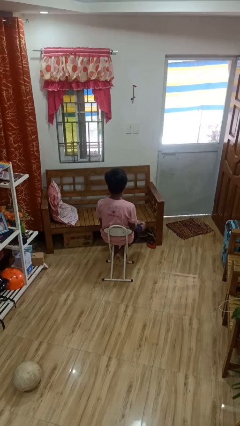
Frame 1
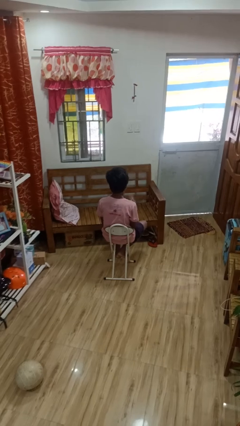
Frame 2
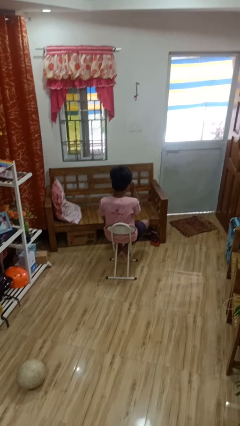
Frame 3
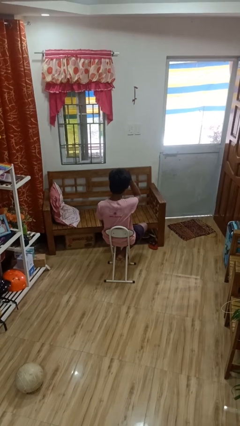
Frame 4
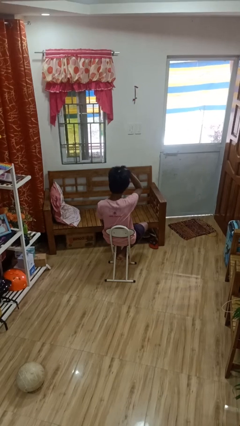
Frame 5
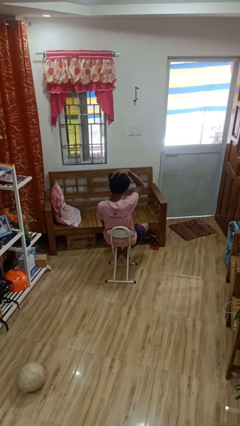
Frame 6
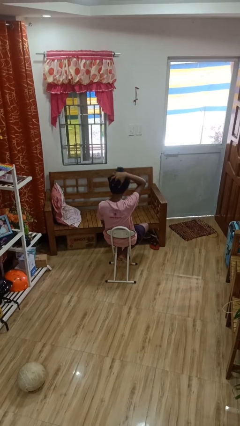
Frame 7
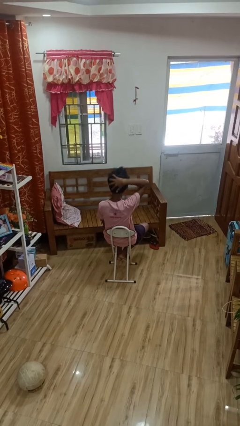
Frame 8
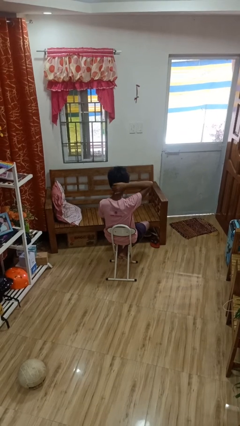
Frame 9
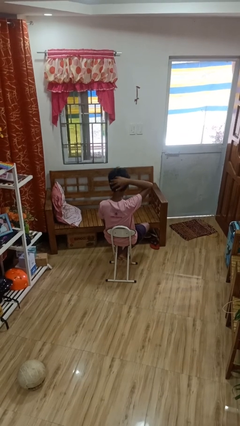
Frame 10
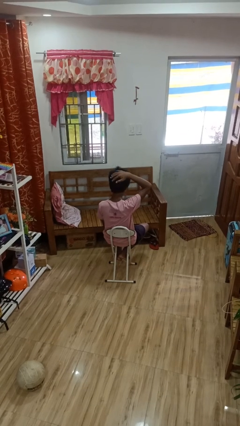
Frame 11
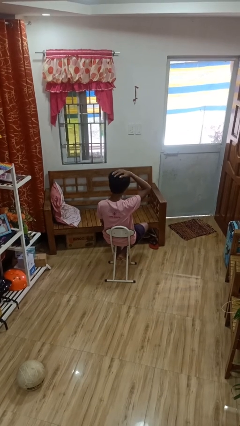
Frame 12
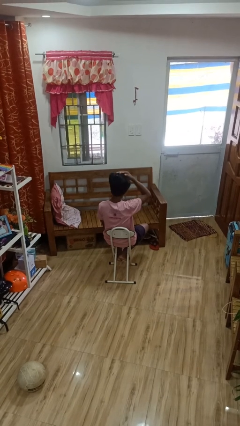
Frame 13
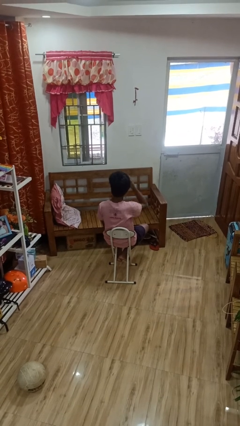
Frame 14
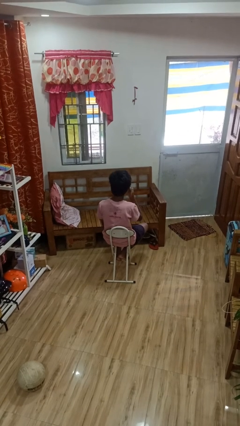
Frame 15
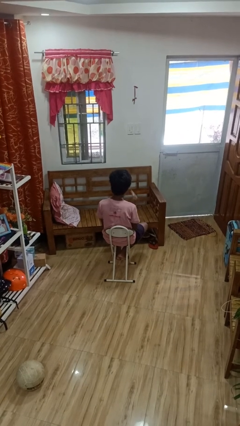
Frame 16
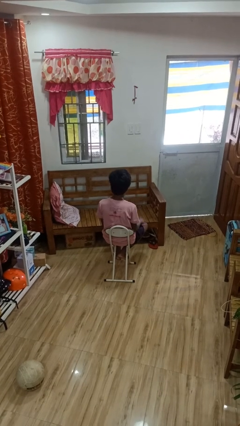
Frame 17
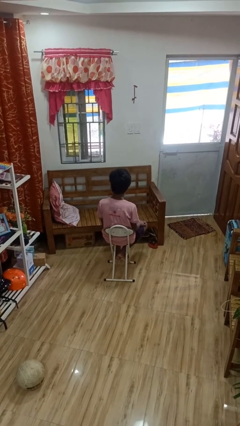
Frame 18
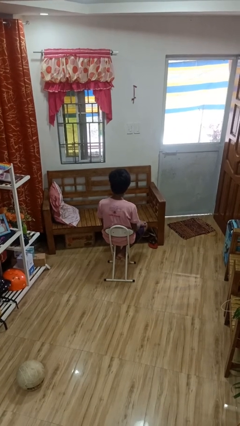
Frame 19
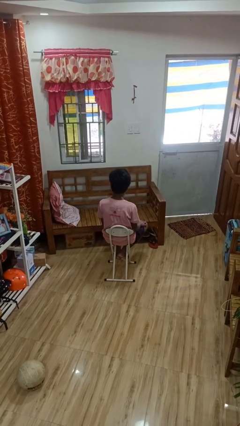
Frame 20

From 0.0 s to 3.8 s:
person strokes hair

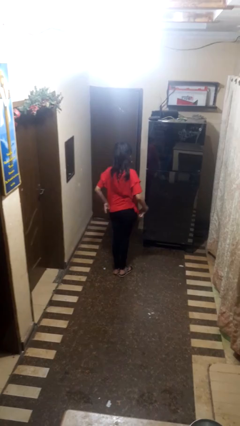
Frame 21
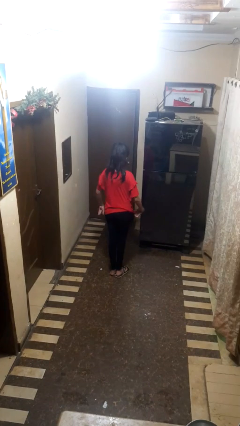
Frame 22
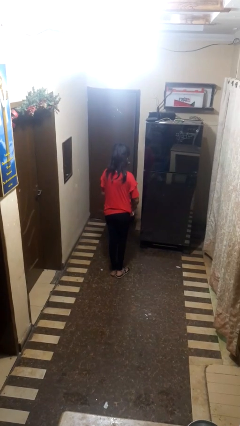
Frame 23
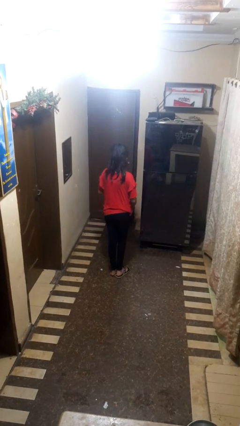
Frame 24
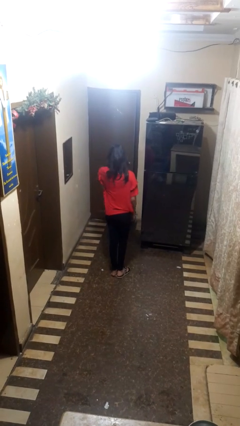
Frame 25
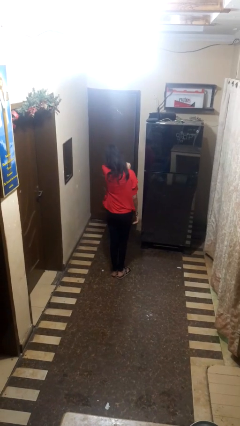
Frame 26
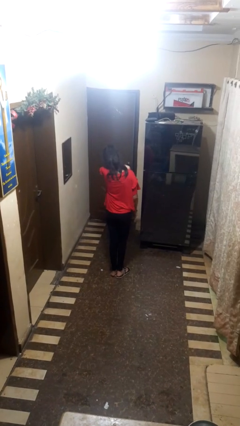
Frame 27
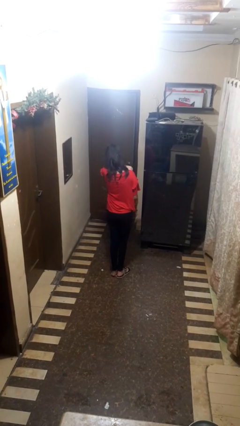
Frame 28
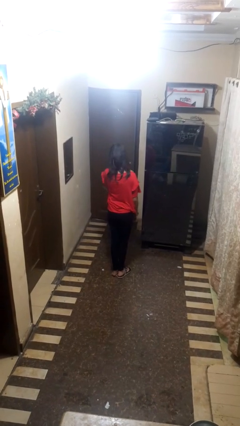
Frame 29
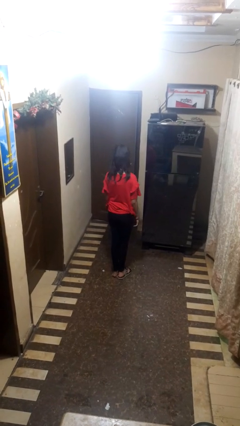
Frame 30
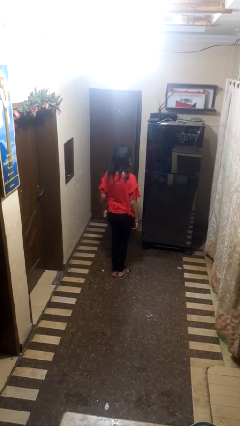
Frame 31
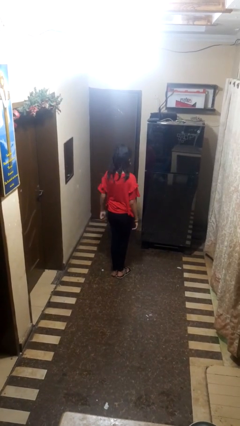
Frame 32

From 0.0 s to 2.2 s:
person sneezes into arm

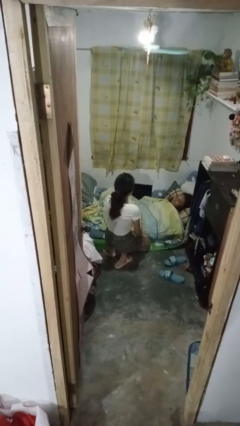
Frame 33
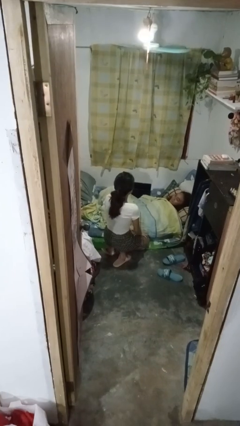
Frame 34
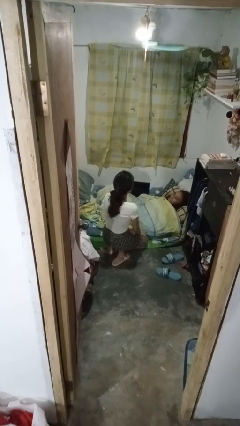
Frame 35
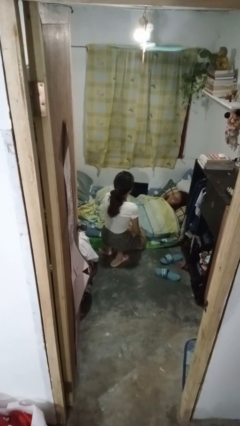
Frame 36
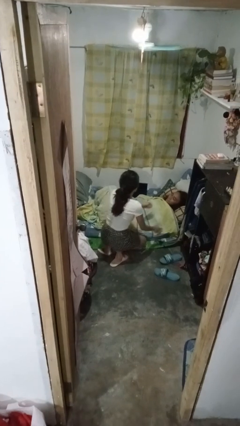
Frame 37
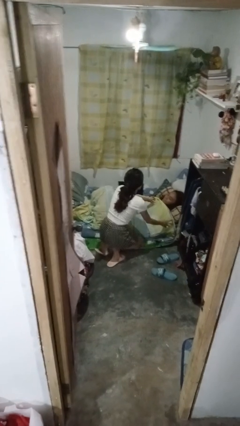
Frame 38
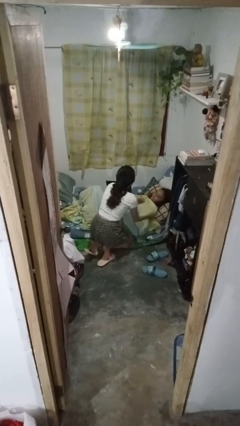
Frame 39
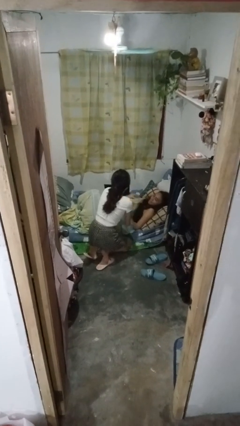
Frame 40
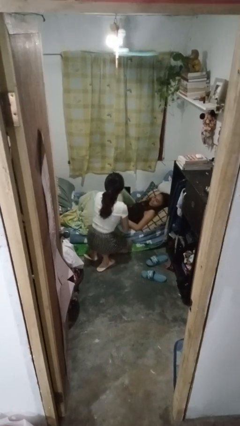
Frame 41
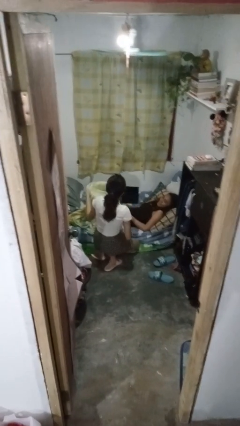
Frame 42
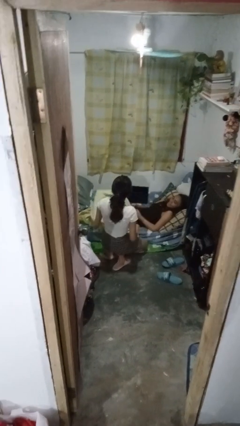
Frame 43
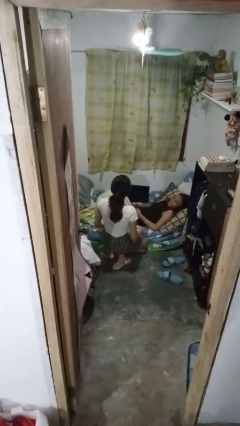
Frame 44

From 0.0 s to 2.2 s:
person uncovers friend with blanket

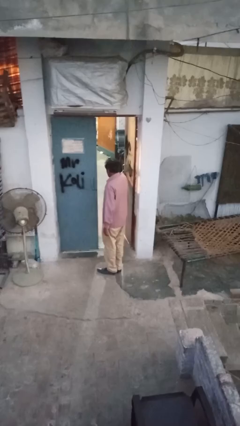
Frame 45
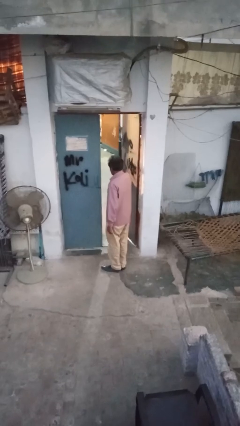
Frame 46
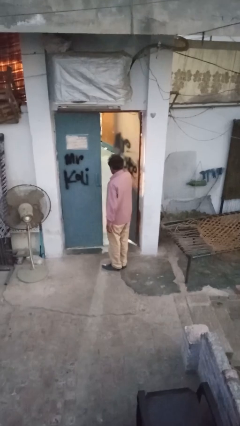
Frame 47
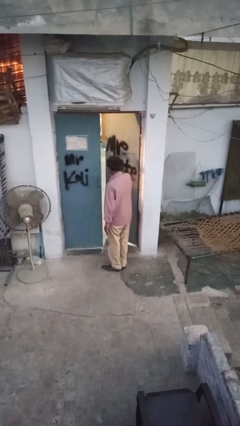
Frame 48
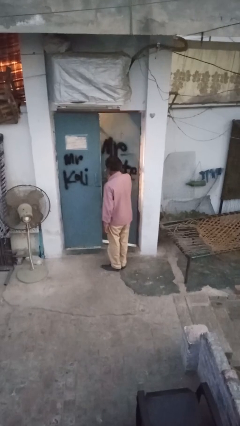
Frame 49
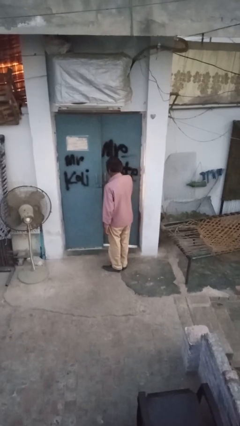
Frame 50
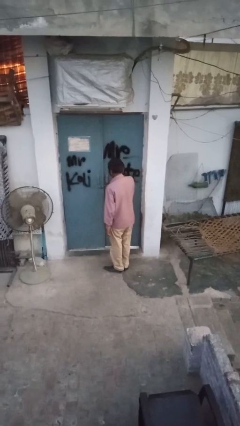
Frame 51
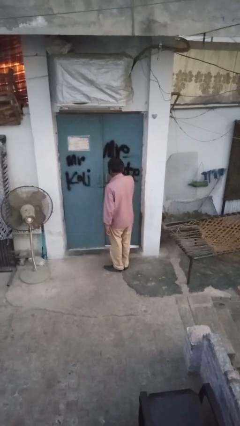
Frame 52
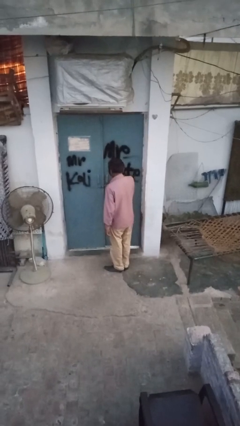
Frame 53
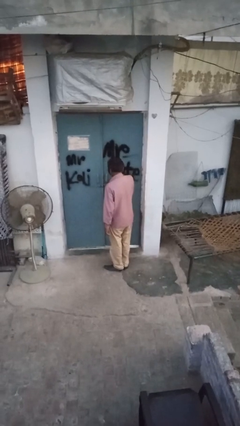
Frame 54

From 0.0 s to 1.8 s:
person closes facility door

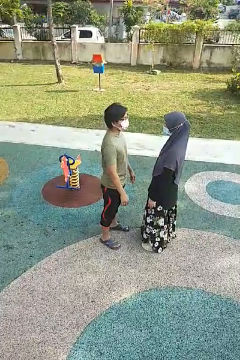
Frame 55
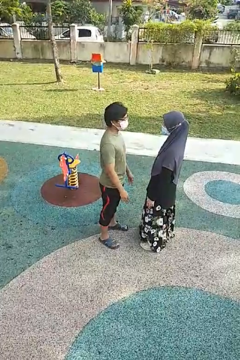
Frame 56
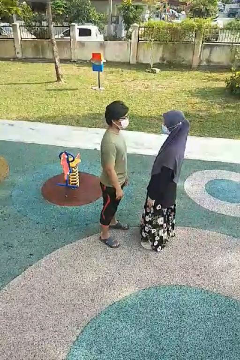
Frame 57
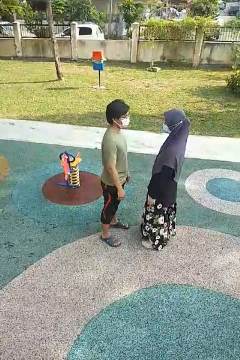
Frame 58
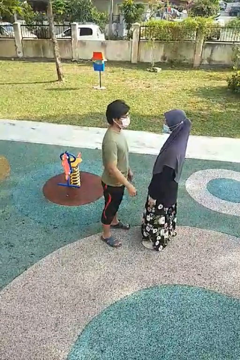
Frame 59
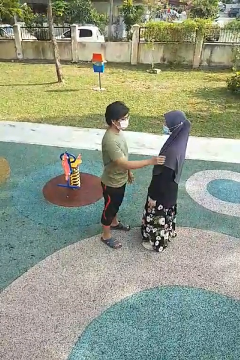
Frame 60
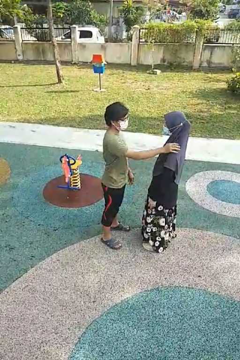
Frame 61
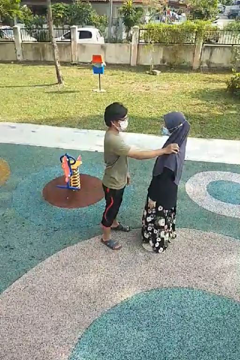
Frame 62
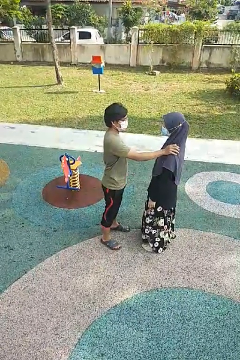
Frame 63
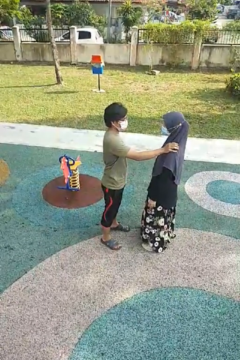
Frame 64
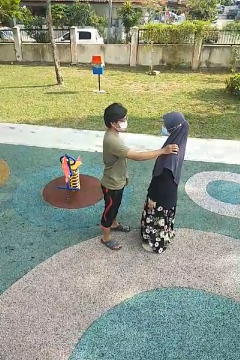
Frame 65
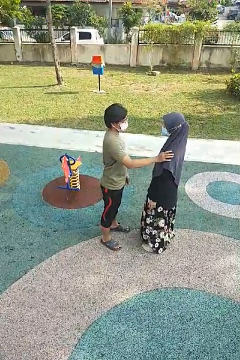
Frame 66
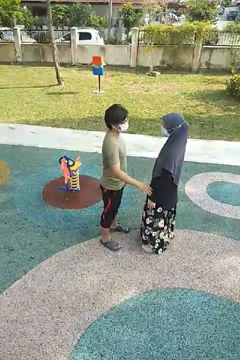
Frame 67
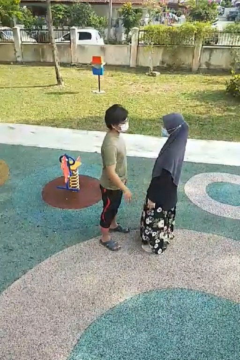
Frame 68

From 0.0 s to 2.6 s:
person pounds shoulders of person

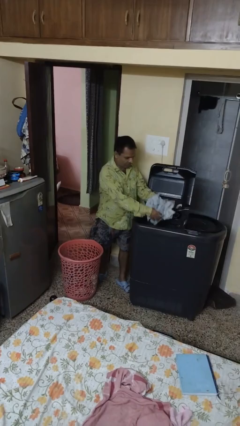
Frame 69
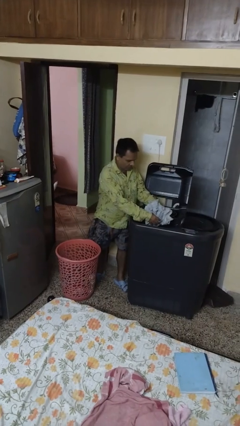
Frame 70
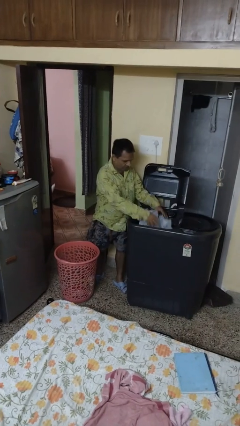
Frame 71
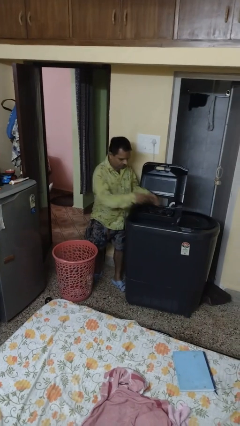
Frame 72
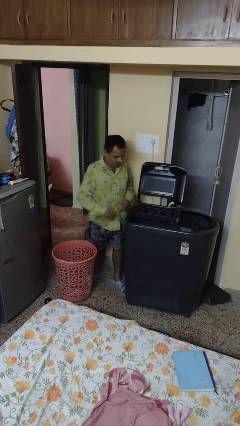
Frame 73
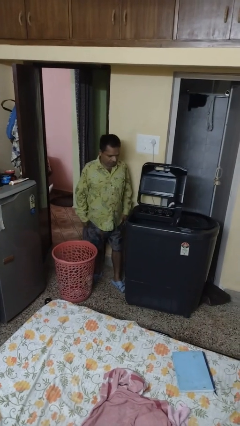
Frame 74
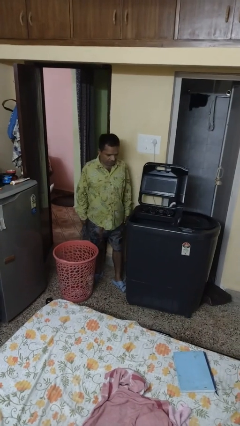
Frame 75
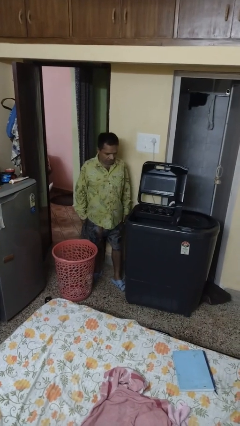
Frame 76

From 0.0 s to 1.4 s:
person loads clotheswasher

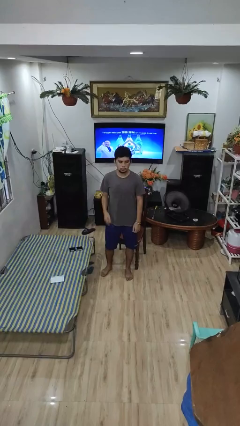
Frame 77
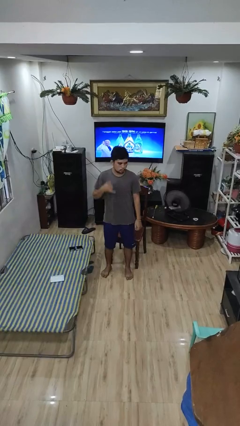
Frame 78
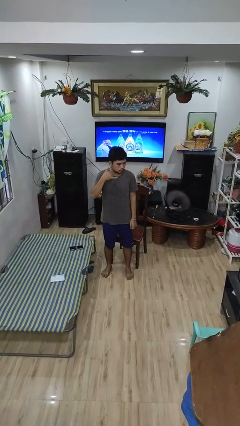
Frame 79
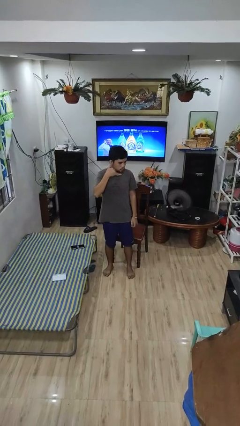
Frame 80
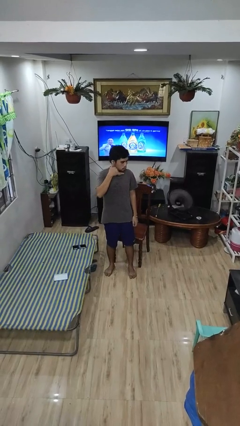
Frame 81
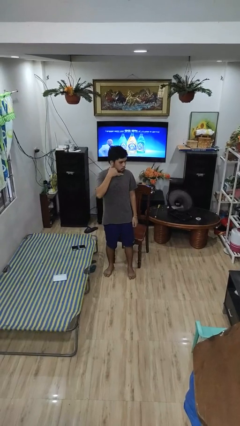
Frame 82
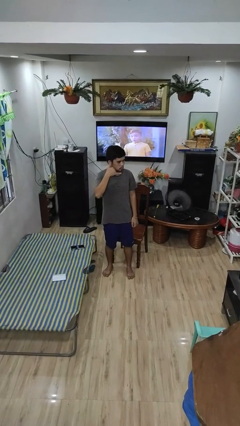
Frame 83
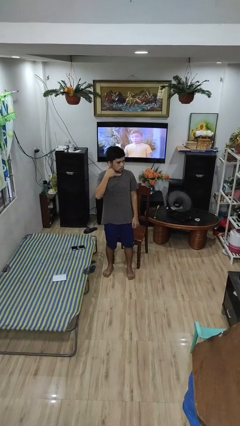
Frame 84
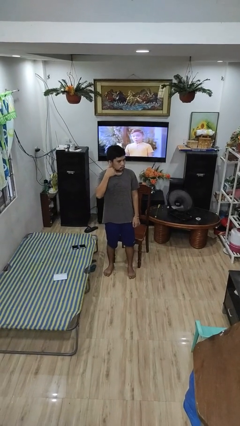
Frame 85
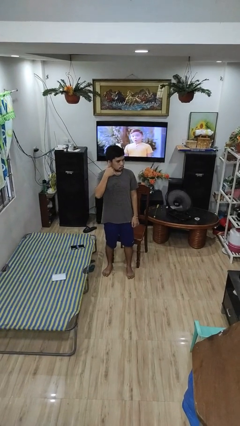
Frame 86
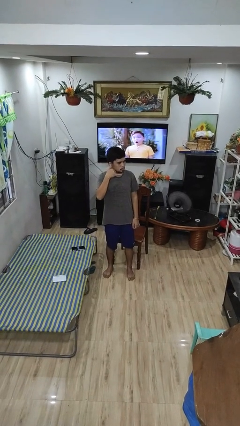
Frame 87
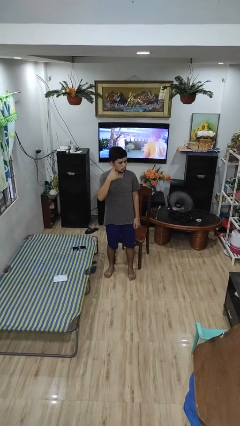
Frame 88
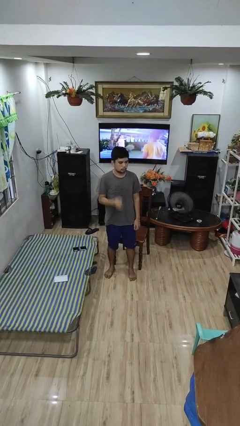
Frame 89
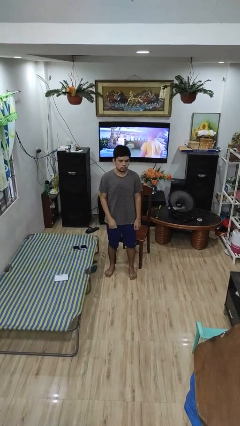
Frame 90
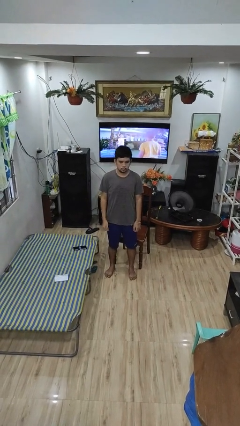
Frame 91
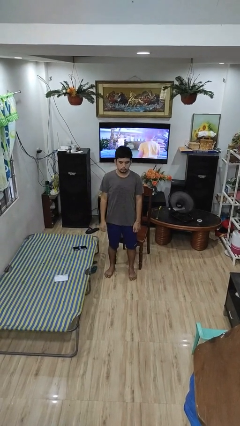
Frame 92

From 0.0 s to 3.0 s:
person gestures call me

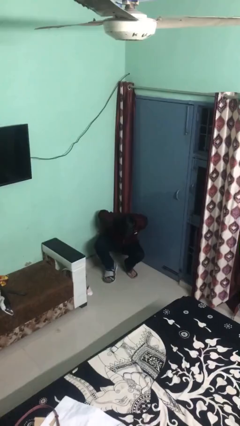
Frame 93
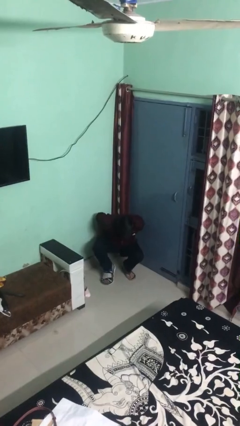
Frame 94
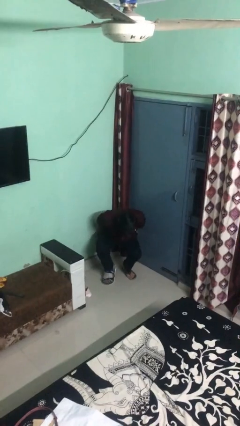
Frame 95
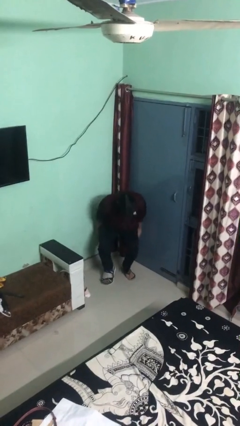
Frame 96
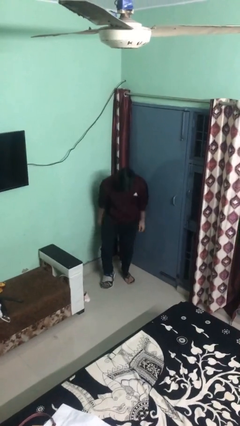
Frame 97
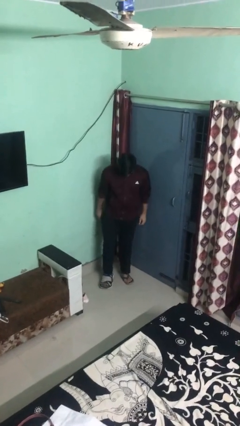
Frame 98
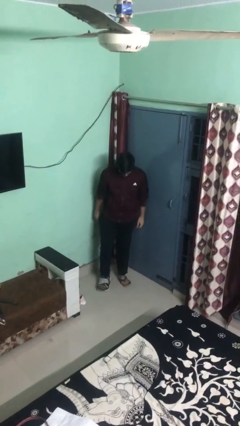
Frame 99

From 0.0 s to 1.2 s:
person stands up
